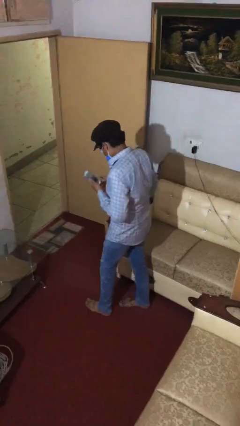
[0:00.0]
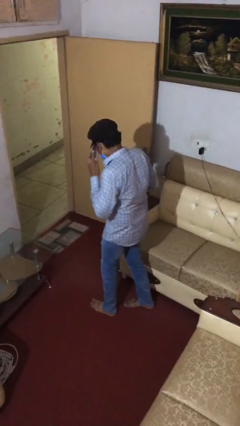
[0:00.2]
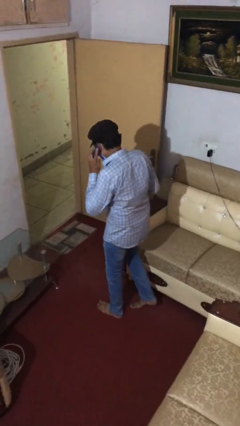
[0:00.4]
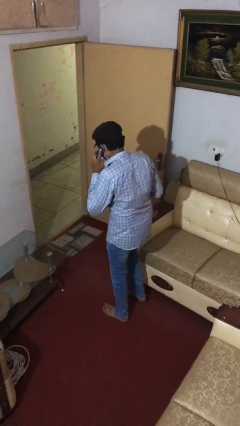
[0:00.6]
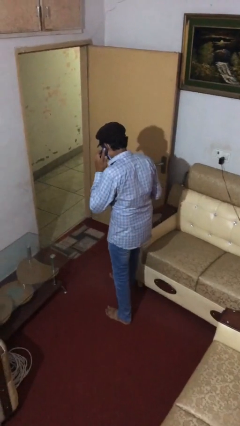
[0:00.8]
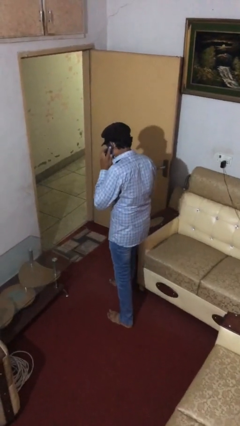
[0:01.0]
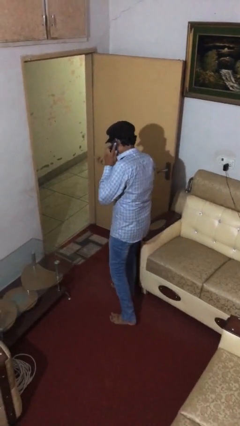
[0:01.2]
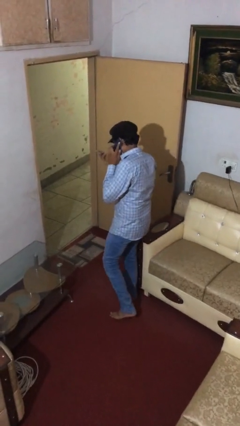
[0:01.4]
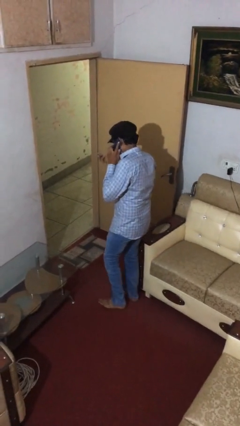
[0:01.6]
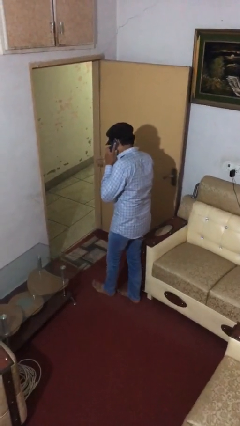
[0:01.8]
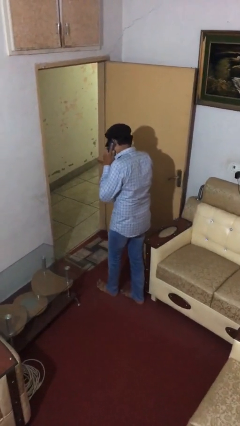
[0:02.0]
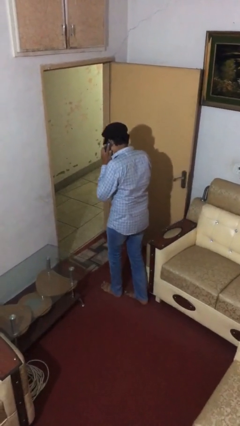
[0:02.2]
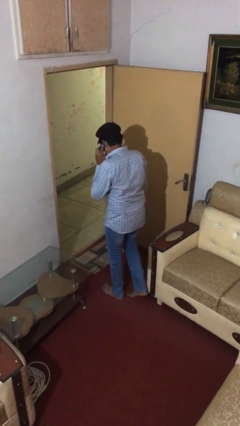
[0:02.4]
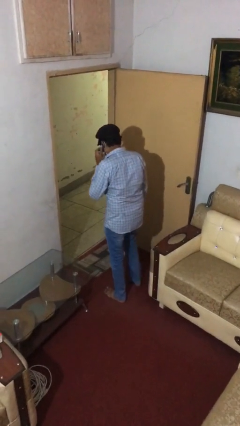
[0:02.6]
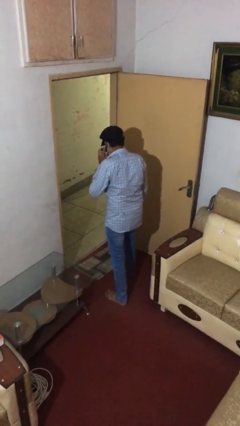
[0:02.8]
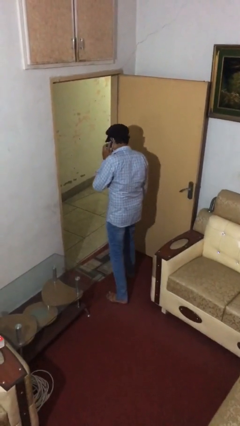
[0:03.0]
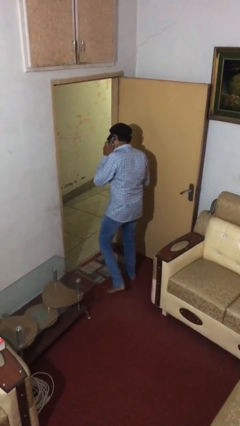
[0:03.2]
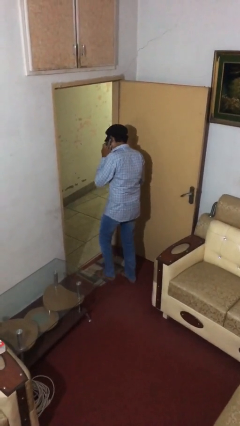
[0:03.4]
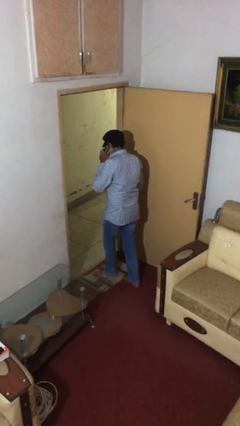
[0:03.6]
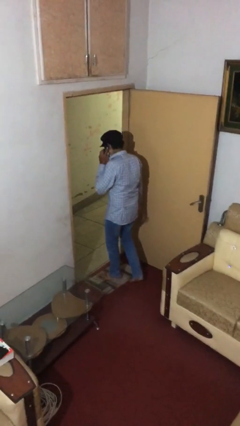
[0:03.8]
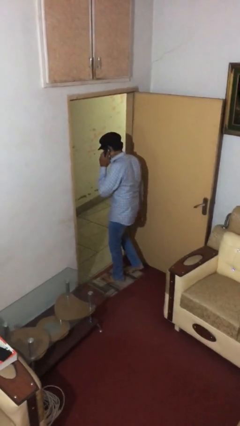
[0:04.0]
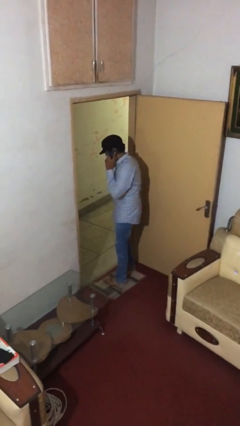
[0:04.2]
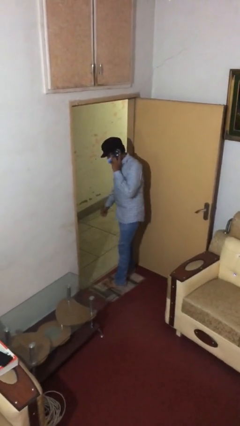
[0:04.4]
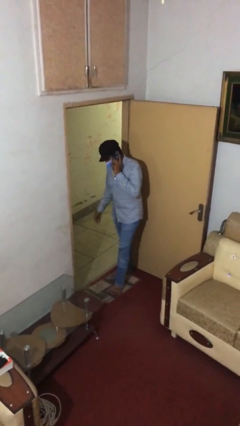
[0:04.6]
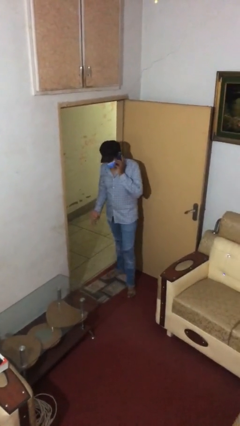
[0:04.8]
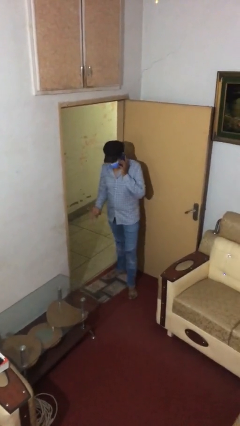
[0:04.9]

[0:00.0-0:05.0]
person talks on phone

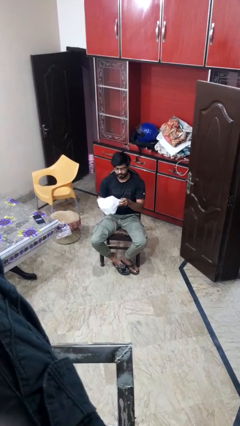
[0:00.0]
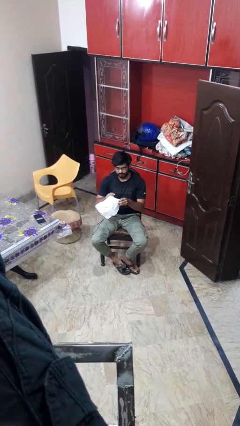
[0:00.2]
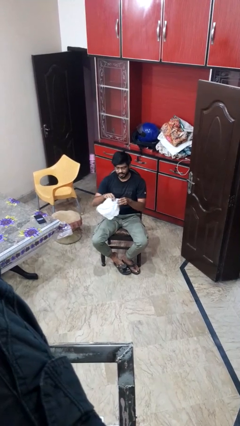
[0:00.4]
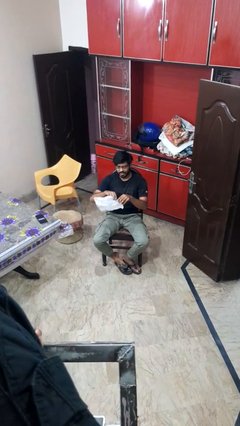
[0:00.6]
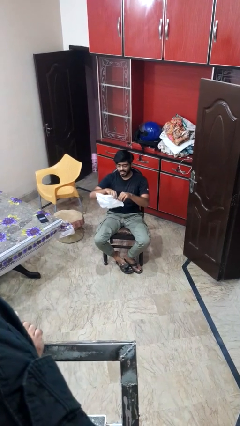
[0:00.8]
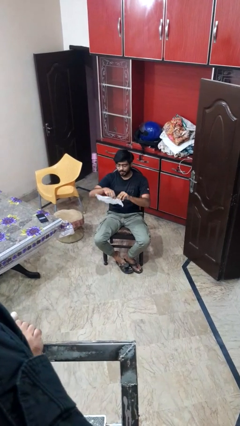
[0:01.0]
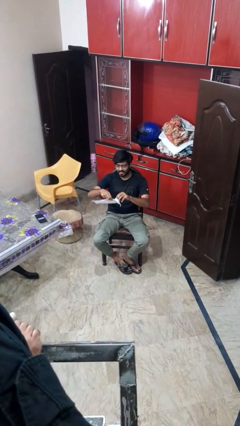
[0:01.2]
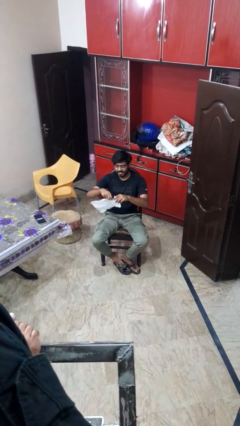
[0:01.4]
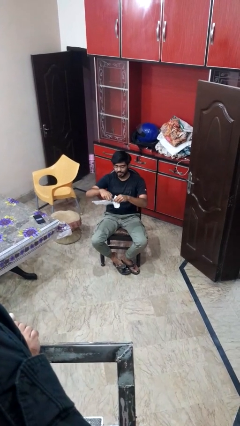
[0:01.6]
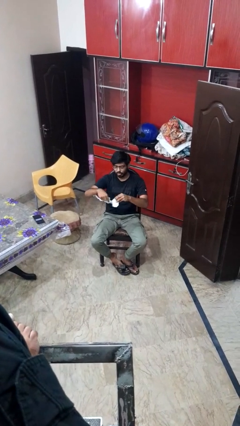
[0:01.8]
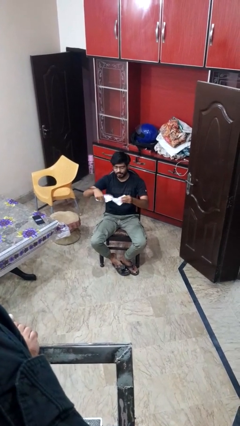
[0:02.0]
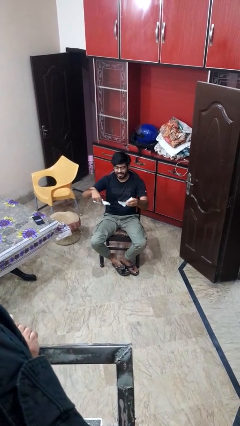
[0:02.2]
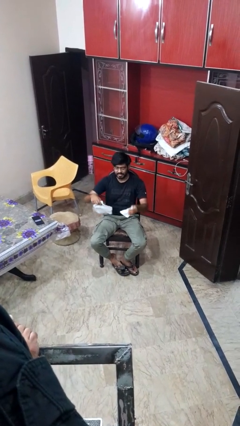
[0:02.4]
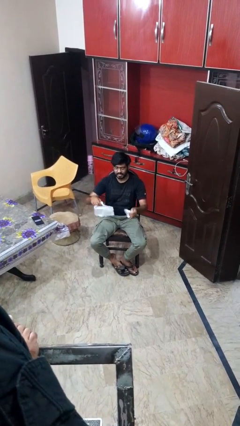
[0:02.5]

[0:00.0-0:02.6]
person tears paper

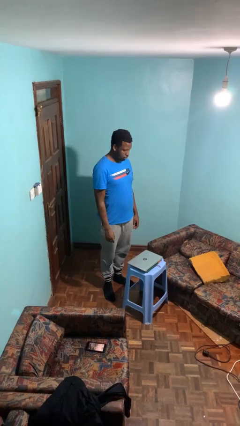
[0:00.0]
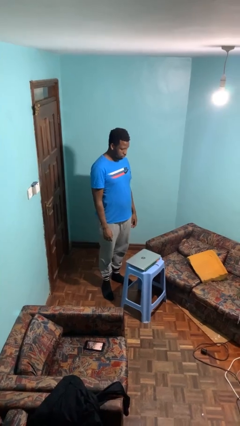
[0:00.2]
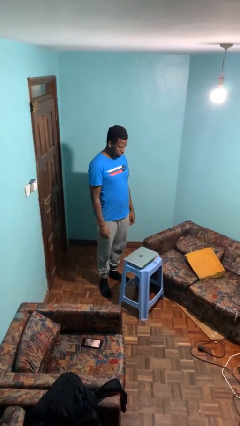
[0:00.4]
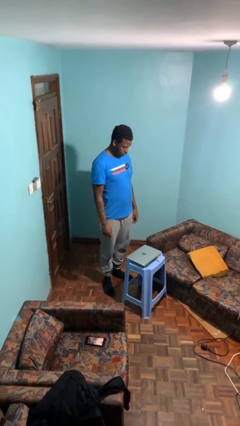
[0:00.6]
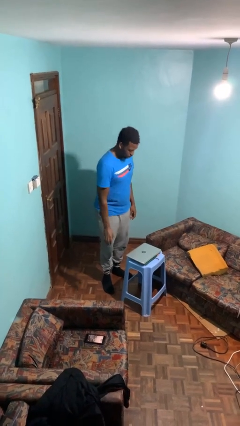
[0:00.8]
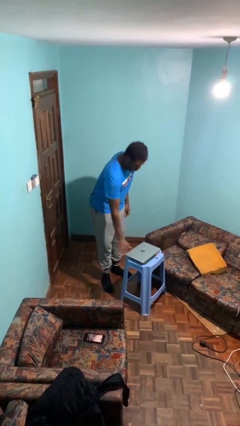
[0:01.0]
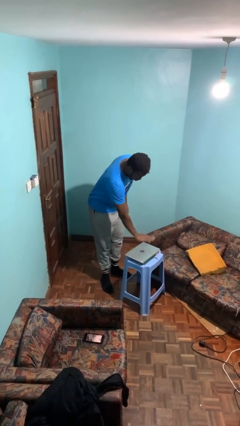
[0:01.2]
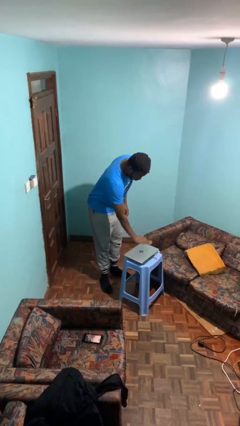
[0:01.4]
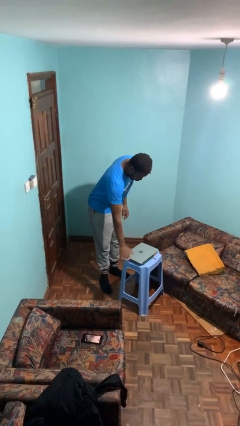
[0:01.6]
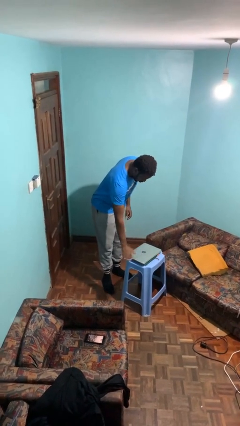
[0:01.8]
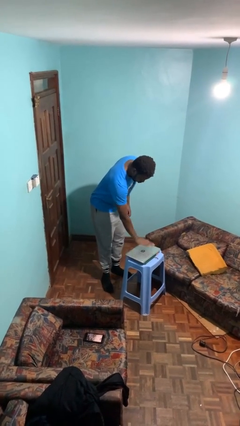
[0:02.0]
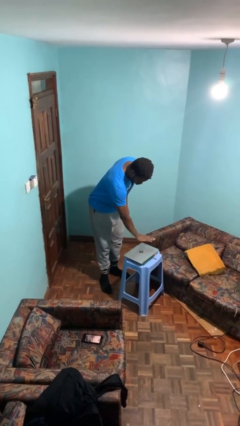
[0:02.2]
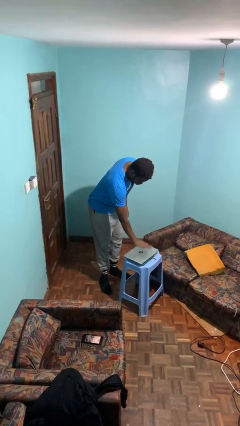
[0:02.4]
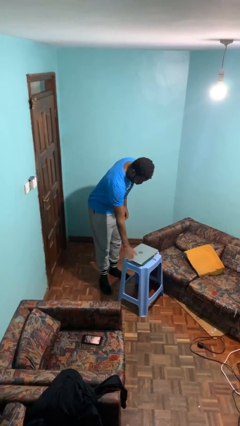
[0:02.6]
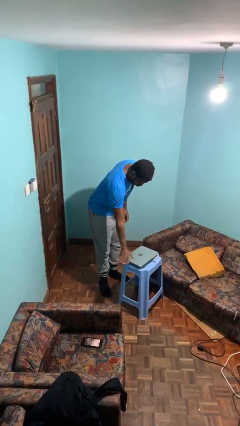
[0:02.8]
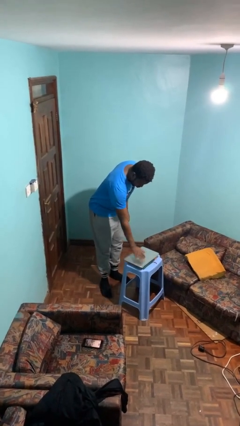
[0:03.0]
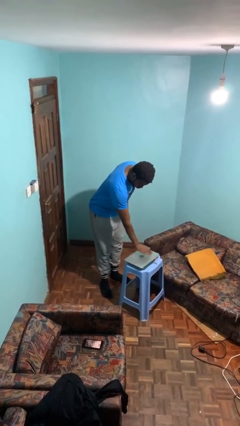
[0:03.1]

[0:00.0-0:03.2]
person waves hand over object

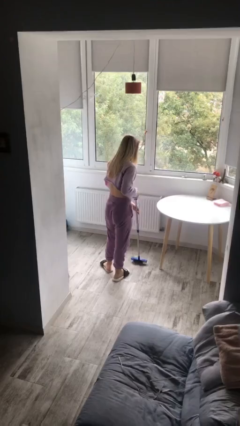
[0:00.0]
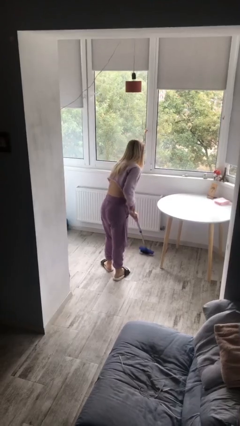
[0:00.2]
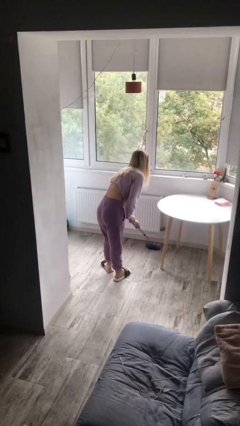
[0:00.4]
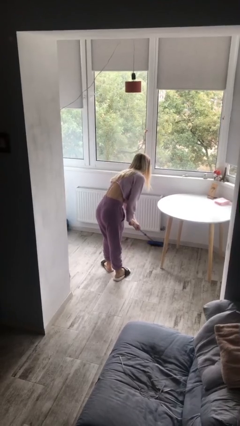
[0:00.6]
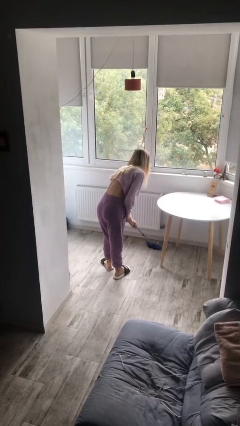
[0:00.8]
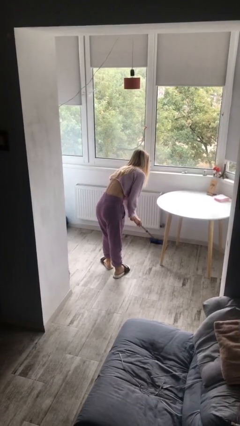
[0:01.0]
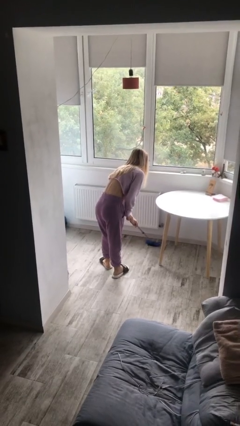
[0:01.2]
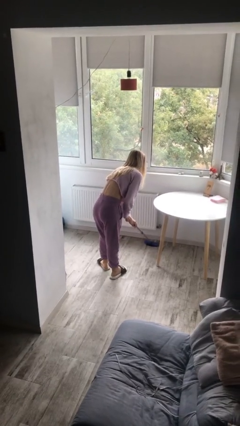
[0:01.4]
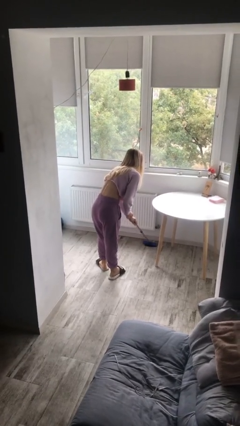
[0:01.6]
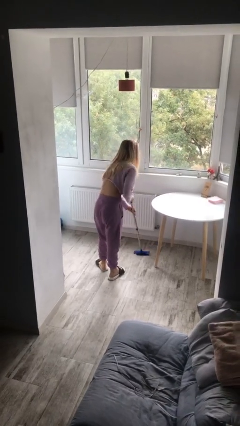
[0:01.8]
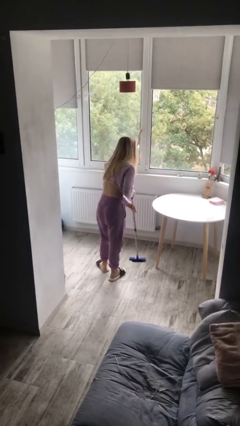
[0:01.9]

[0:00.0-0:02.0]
person mops

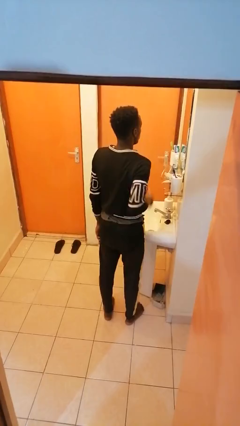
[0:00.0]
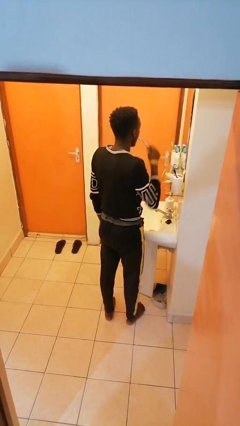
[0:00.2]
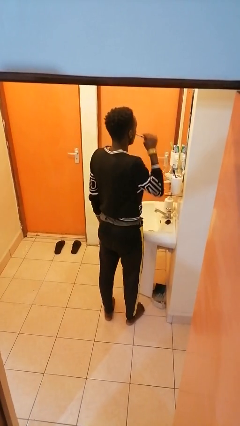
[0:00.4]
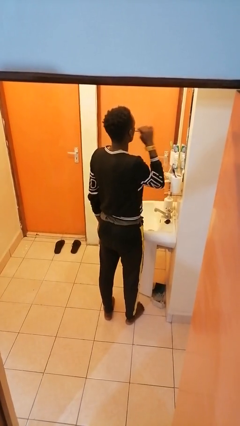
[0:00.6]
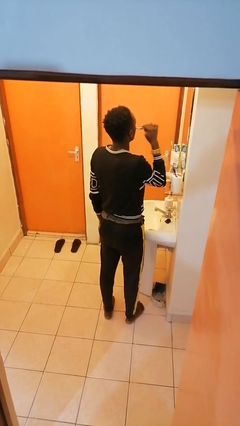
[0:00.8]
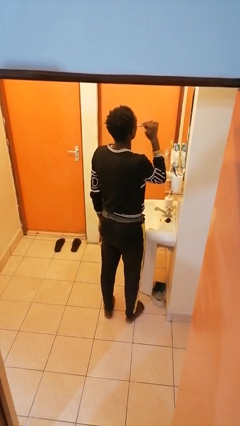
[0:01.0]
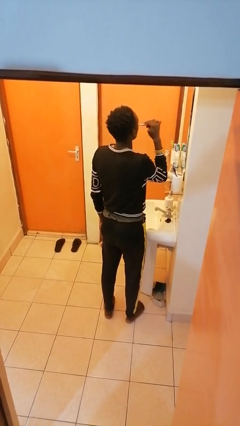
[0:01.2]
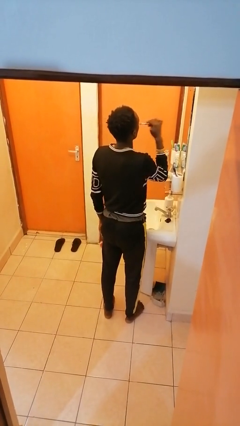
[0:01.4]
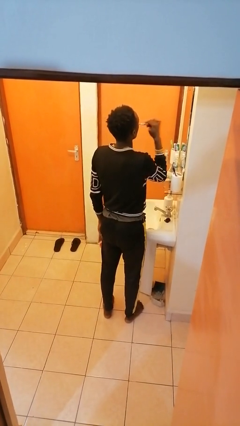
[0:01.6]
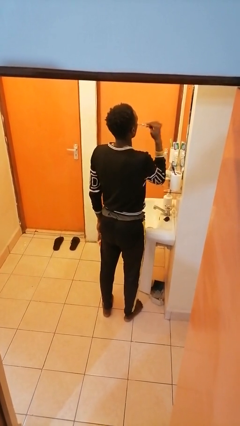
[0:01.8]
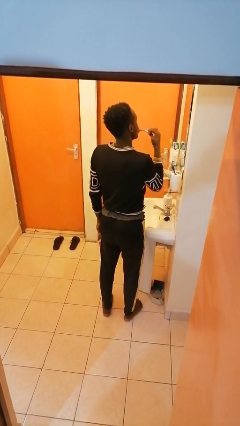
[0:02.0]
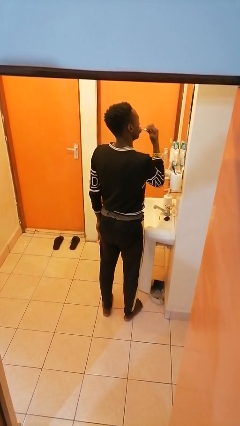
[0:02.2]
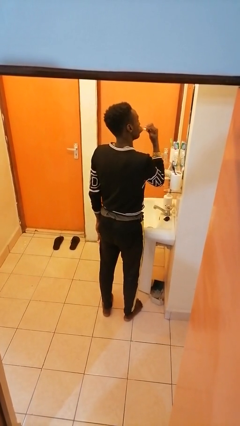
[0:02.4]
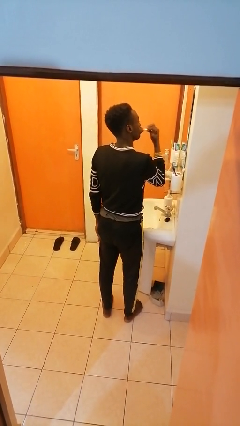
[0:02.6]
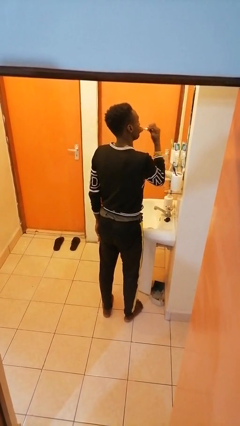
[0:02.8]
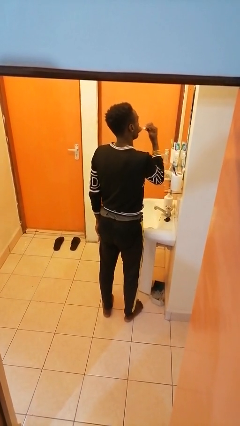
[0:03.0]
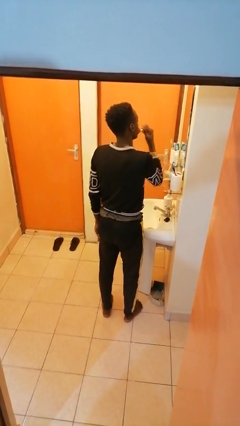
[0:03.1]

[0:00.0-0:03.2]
person brushes teeth

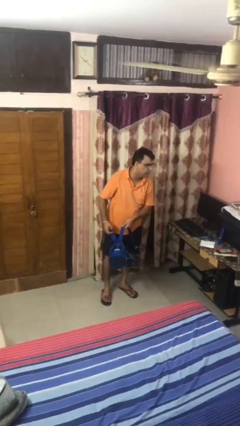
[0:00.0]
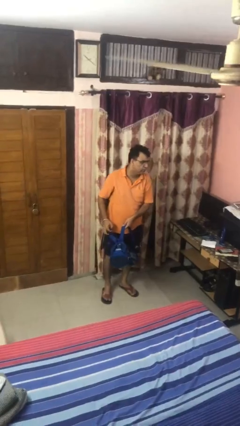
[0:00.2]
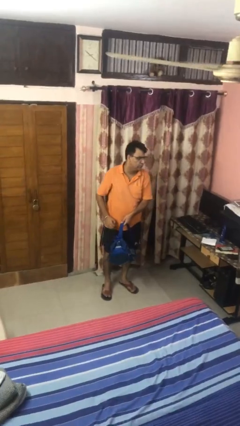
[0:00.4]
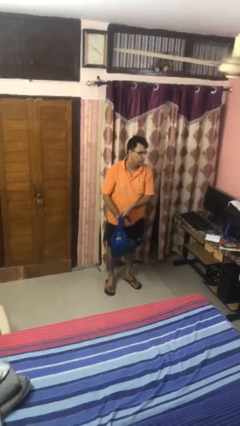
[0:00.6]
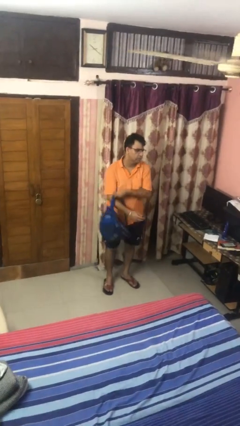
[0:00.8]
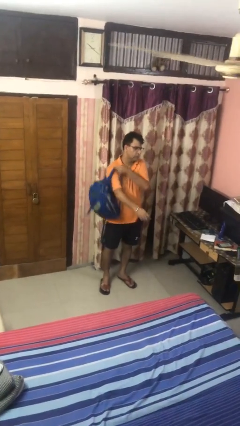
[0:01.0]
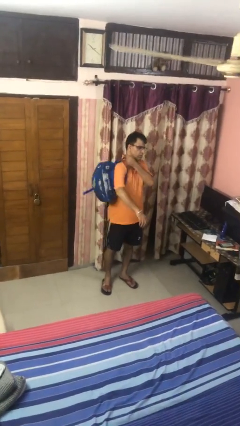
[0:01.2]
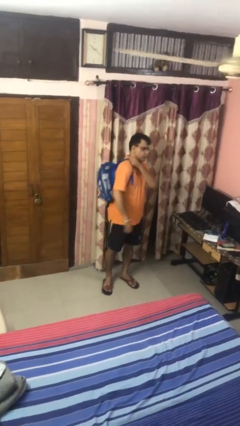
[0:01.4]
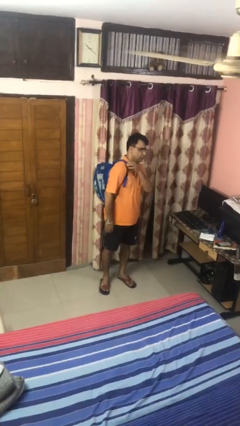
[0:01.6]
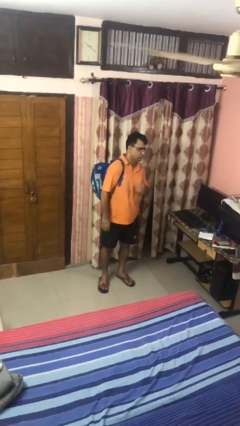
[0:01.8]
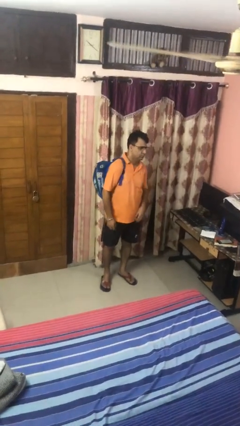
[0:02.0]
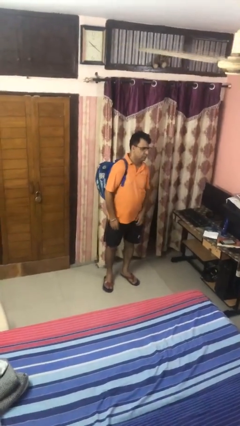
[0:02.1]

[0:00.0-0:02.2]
person puts on backpack
